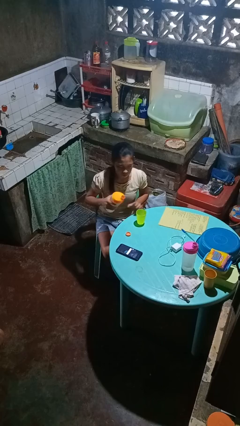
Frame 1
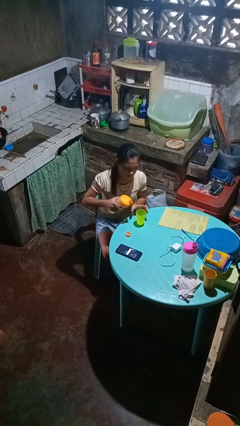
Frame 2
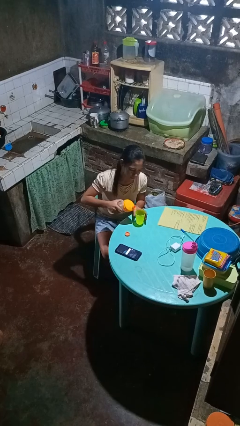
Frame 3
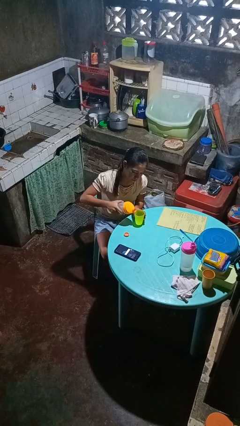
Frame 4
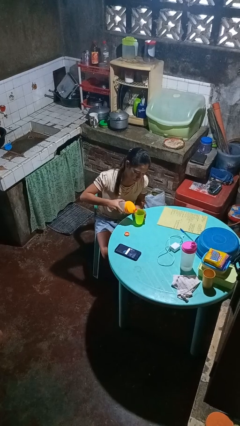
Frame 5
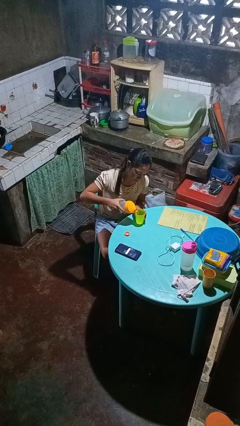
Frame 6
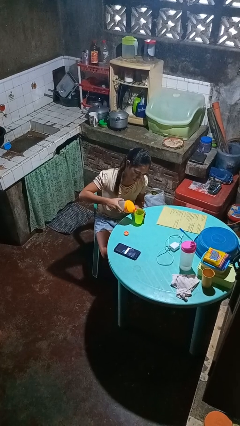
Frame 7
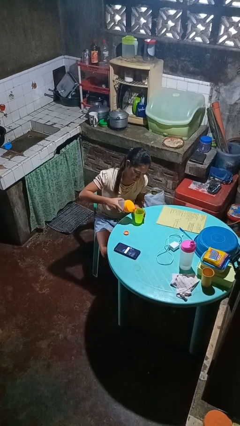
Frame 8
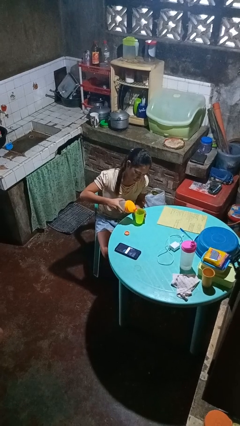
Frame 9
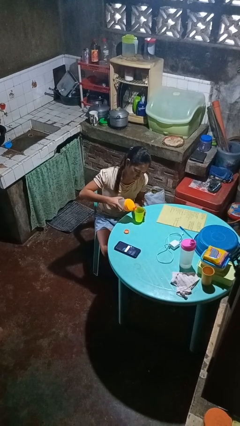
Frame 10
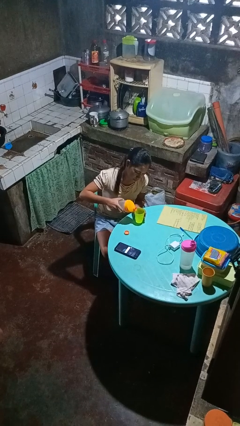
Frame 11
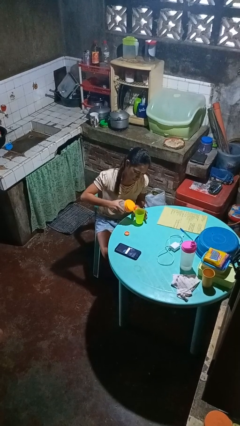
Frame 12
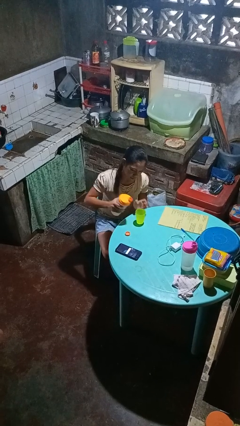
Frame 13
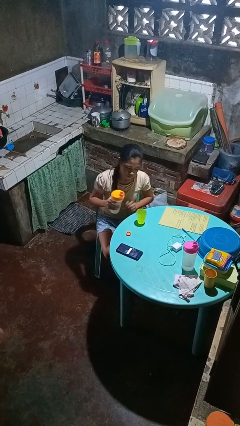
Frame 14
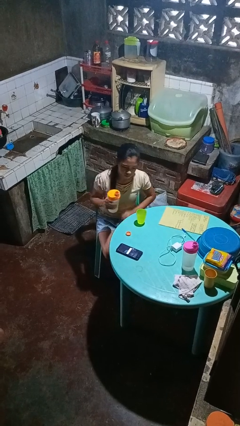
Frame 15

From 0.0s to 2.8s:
person pours liquid into cup

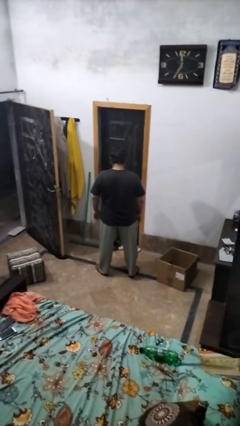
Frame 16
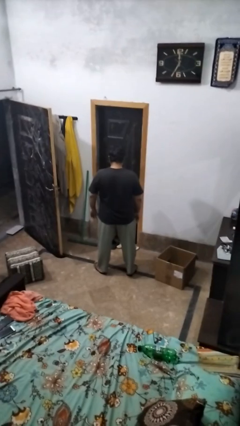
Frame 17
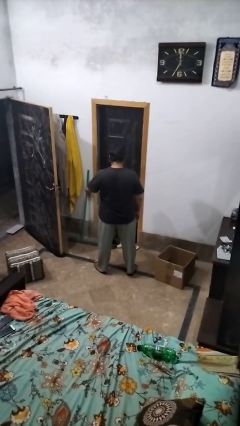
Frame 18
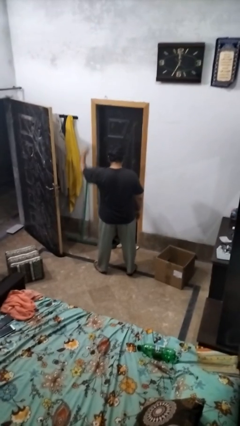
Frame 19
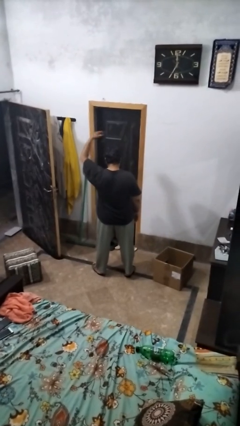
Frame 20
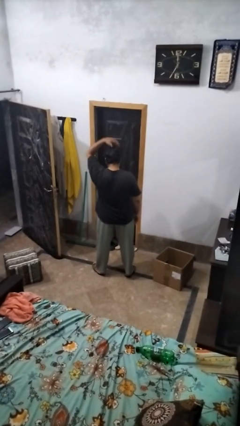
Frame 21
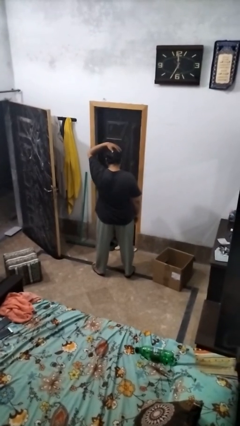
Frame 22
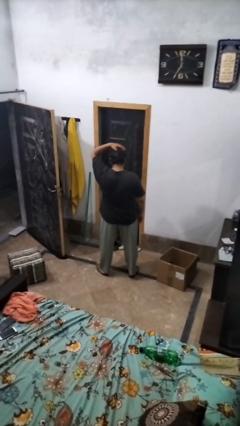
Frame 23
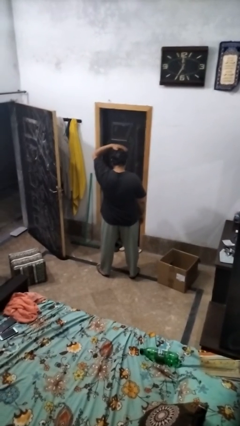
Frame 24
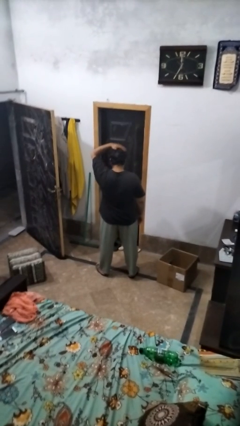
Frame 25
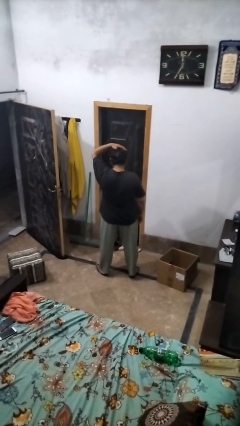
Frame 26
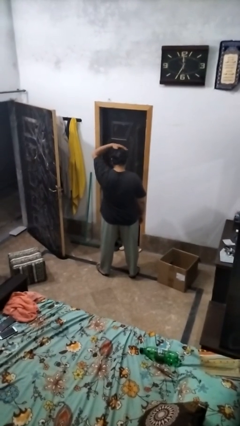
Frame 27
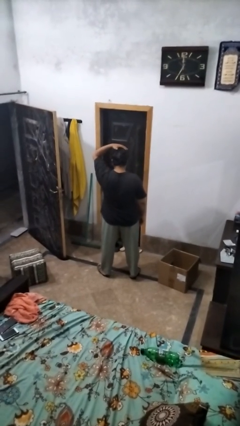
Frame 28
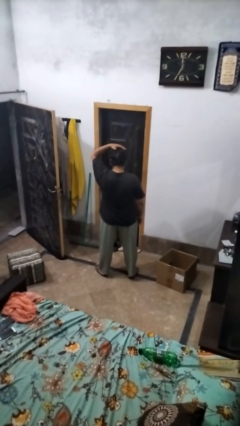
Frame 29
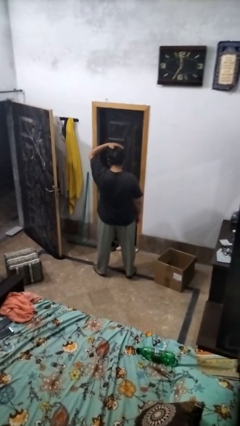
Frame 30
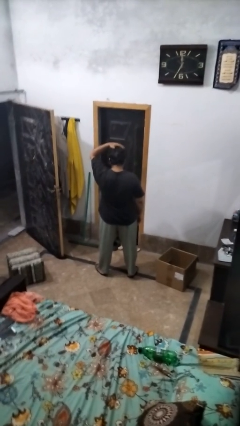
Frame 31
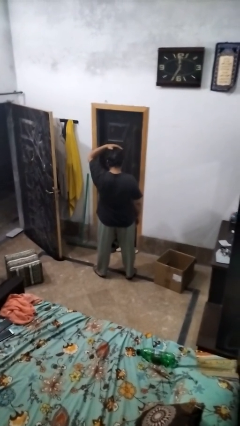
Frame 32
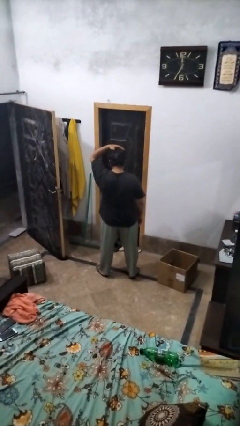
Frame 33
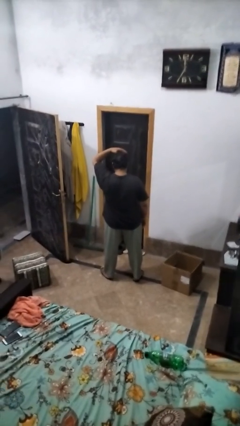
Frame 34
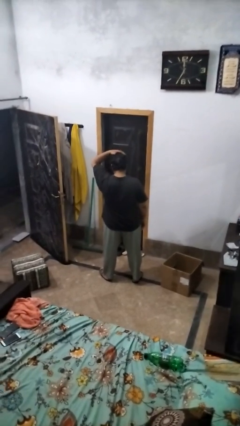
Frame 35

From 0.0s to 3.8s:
person pats head

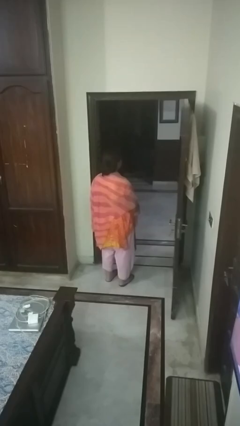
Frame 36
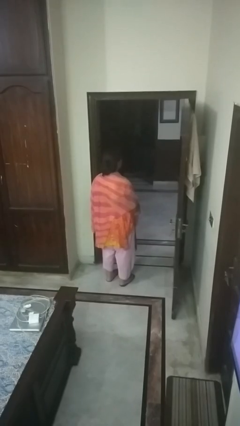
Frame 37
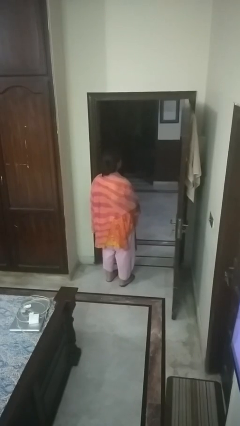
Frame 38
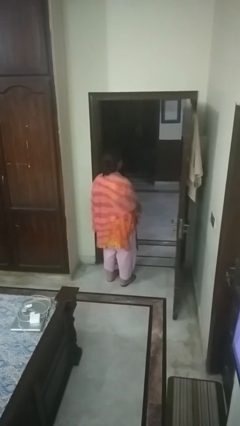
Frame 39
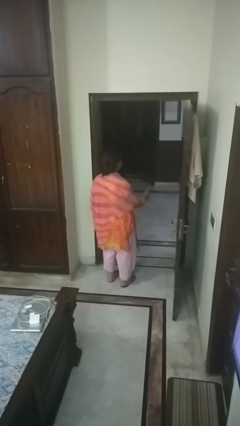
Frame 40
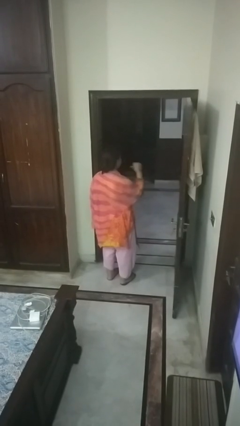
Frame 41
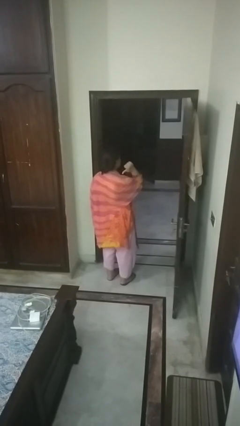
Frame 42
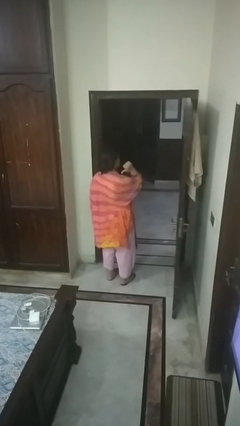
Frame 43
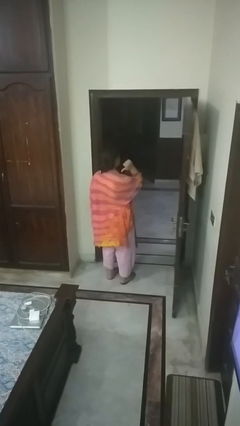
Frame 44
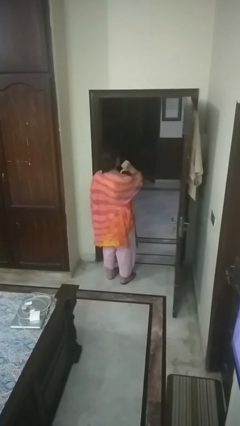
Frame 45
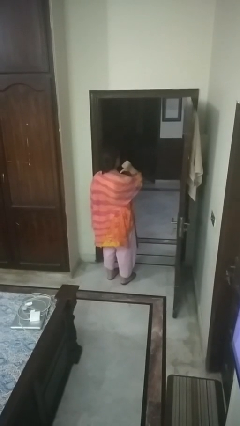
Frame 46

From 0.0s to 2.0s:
person gestures behind me

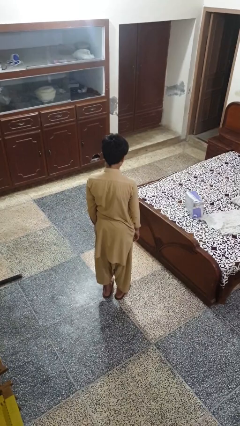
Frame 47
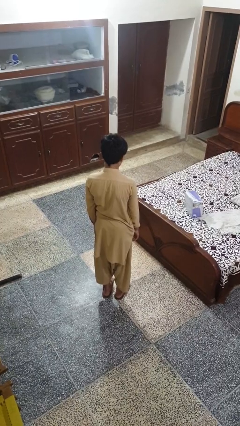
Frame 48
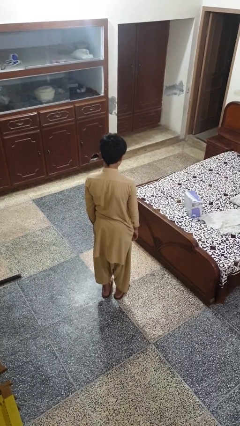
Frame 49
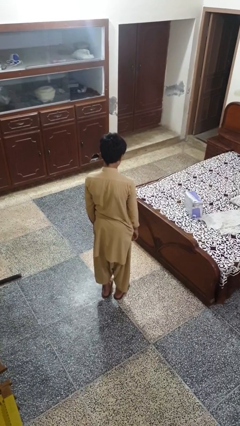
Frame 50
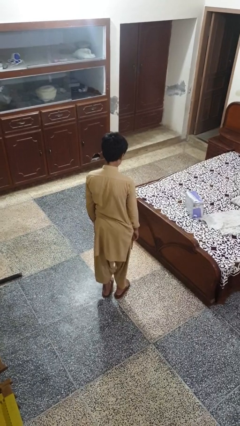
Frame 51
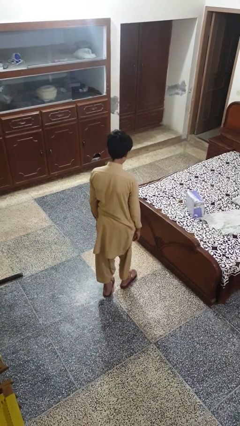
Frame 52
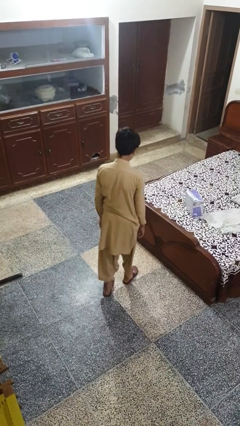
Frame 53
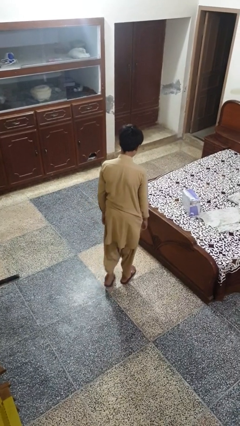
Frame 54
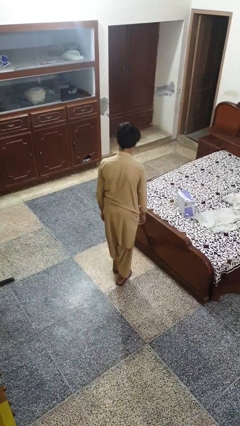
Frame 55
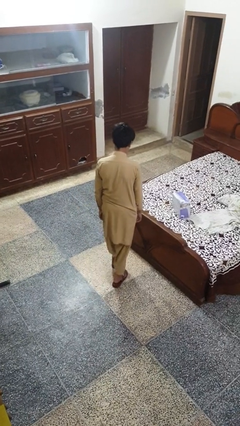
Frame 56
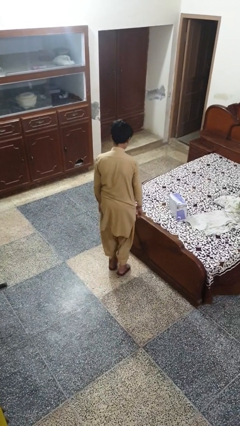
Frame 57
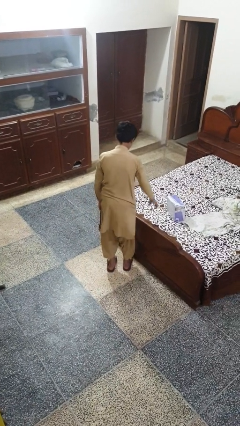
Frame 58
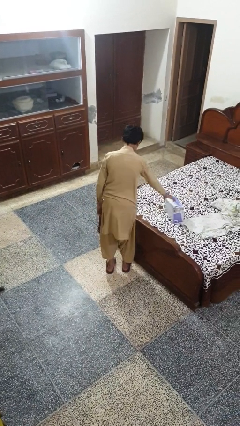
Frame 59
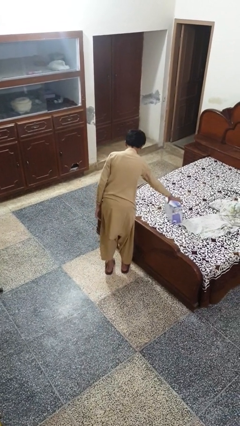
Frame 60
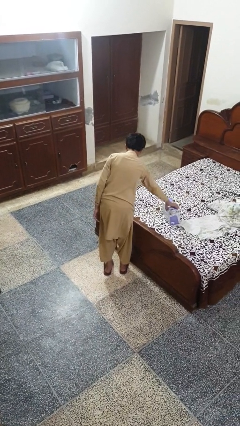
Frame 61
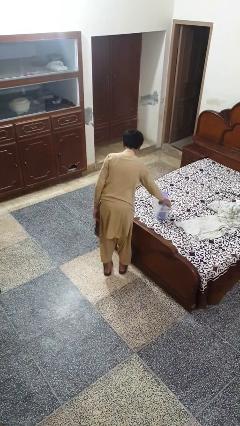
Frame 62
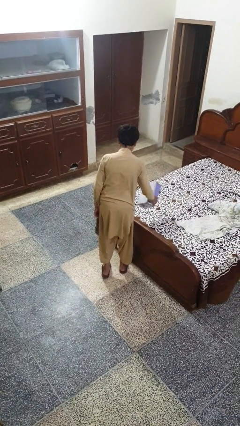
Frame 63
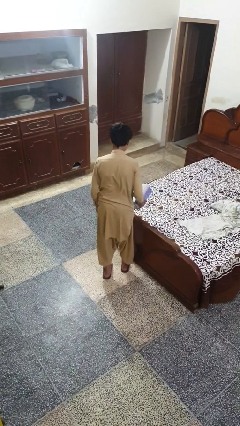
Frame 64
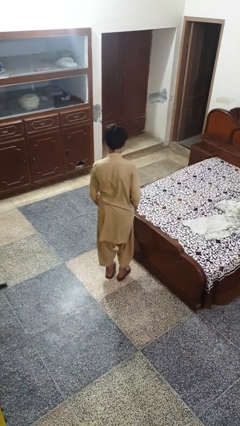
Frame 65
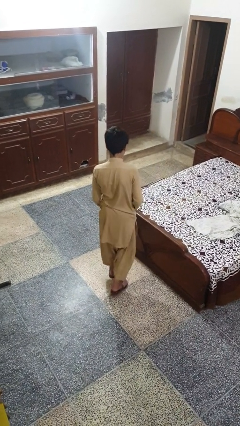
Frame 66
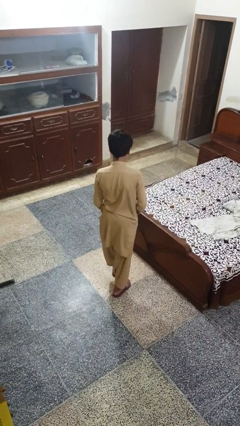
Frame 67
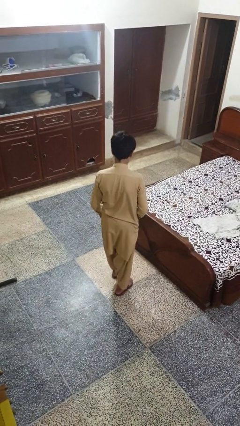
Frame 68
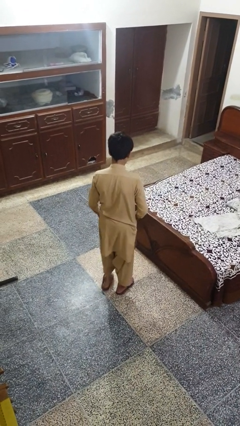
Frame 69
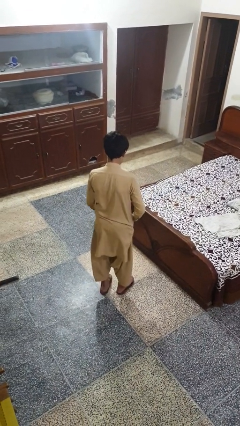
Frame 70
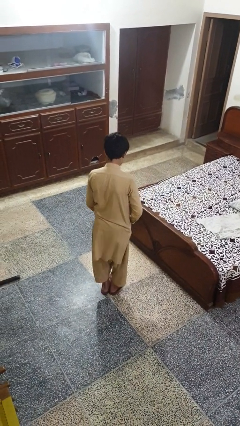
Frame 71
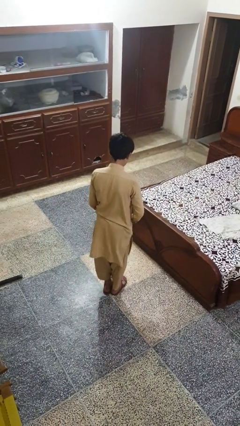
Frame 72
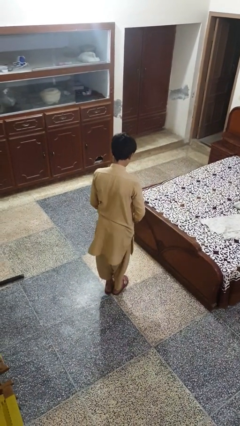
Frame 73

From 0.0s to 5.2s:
person picks up object from bed

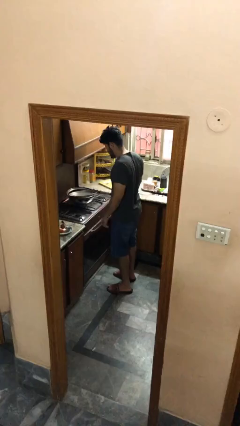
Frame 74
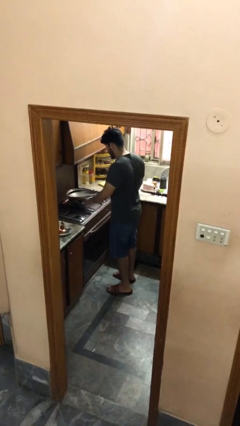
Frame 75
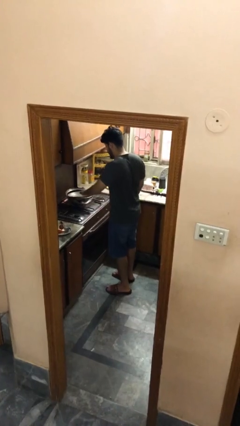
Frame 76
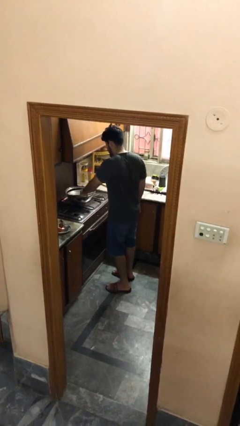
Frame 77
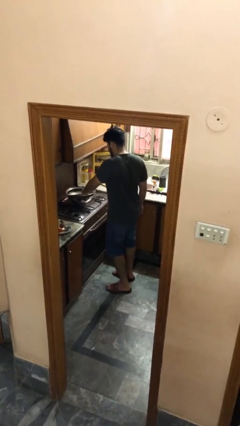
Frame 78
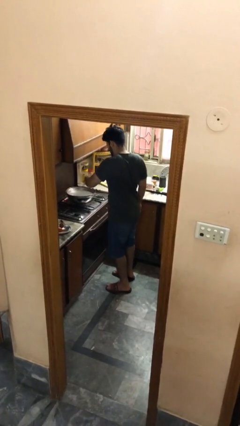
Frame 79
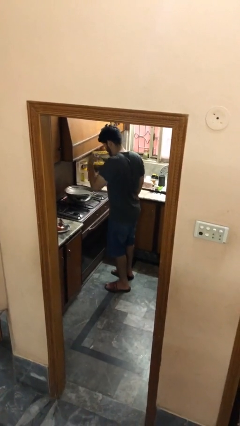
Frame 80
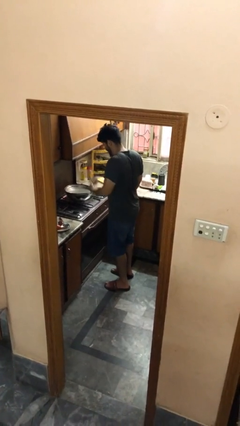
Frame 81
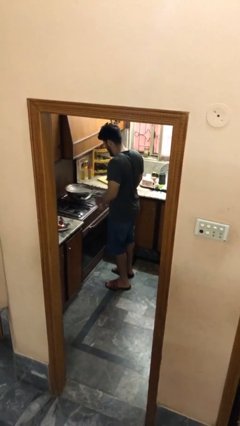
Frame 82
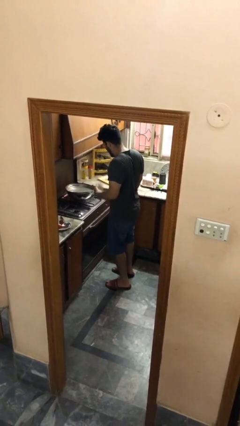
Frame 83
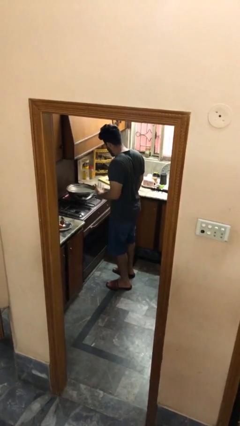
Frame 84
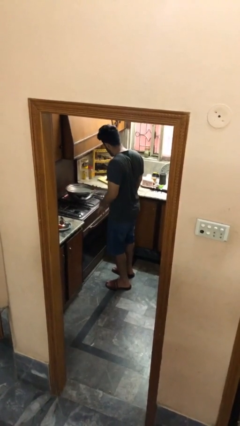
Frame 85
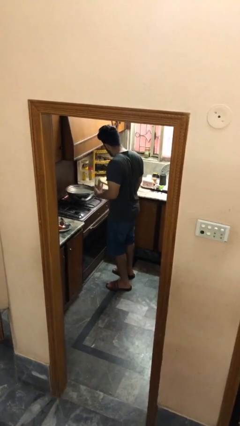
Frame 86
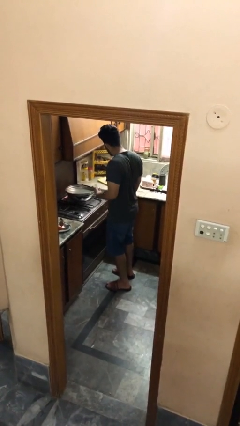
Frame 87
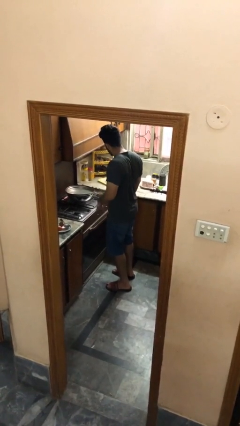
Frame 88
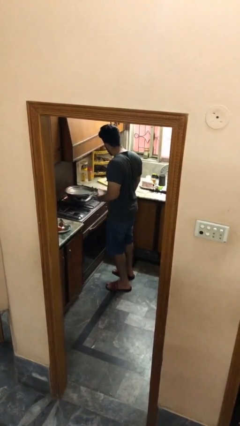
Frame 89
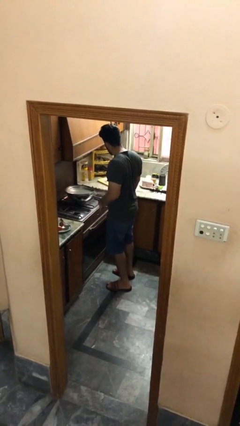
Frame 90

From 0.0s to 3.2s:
person burns hand

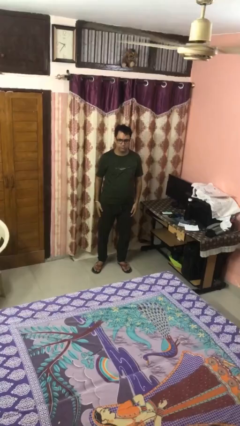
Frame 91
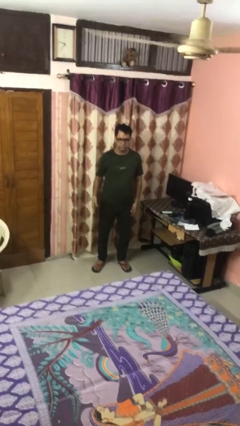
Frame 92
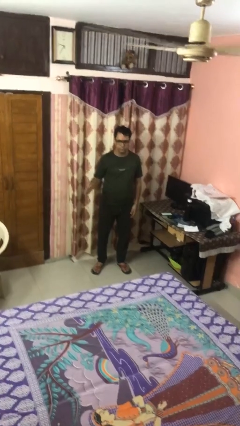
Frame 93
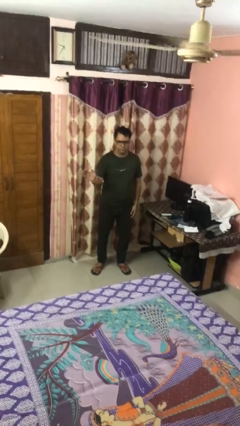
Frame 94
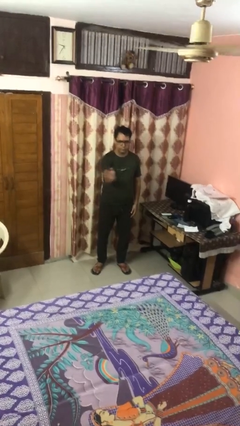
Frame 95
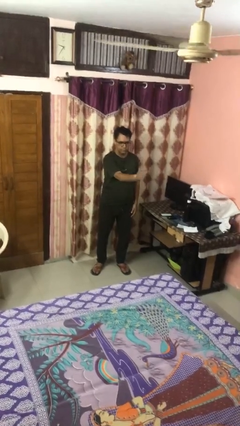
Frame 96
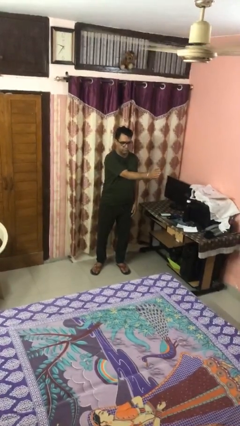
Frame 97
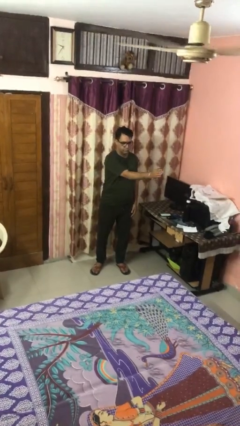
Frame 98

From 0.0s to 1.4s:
person gestures swipe left
